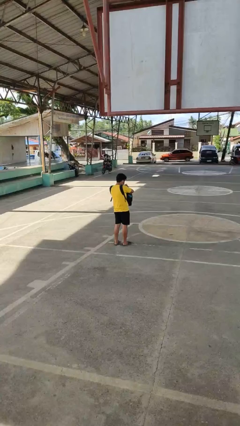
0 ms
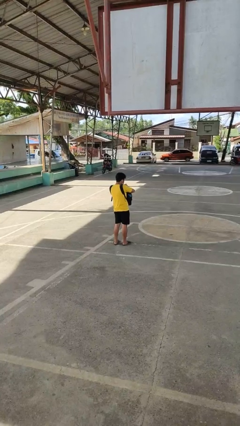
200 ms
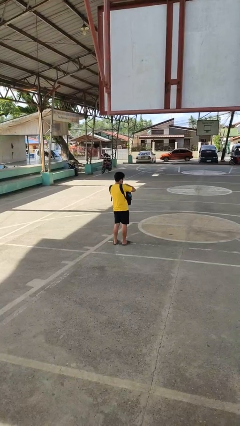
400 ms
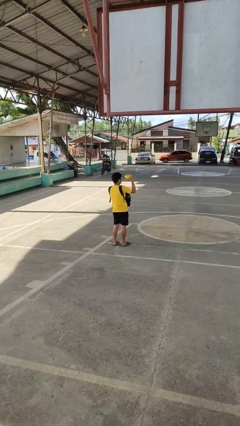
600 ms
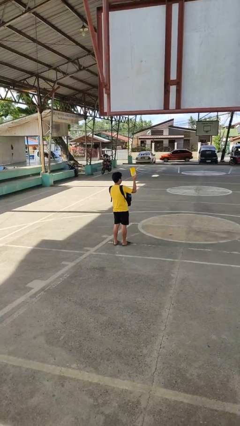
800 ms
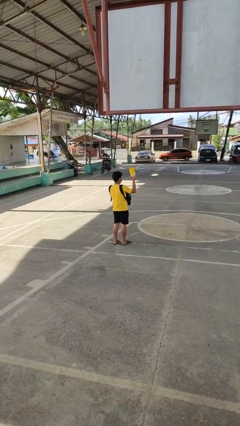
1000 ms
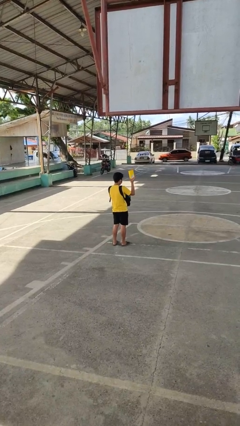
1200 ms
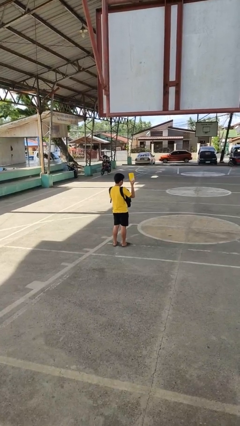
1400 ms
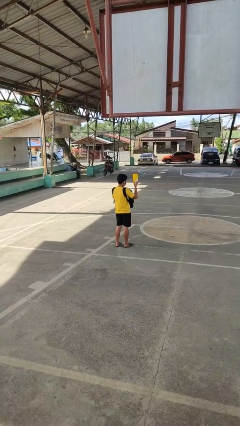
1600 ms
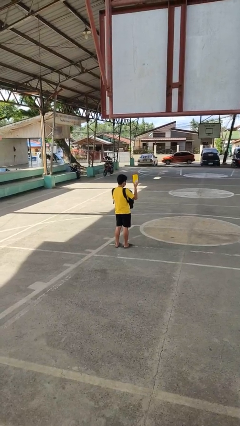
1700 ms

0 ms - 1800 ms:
person takes object from backpack

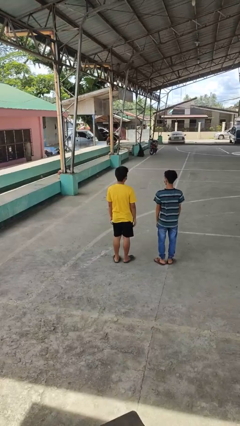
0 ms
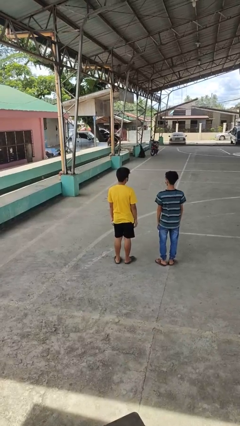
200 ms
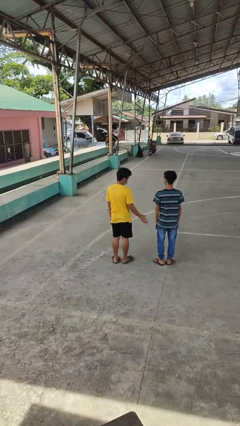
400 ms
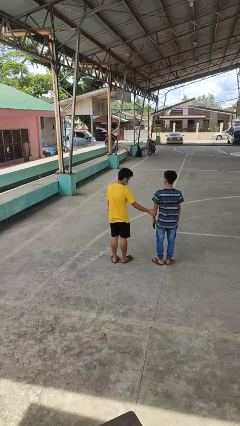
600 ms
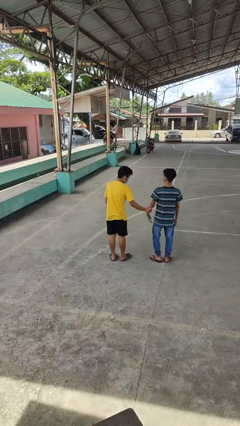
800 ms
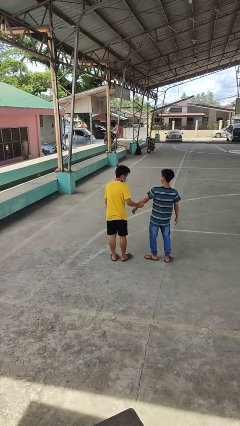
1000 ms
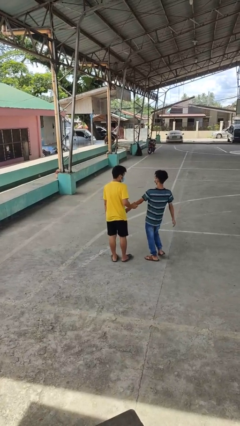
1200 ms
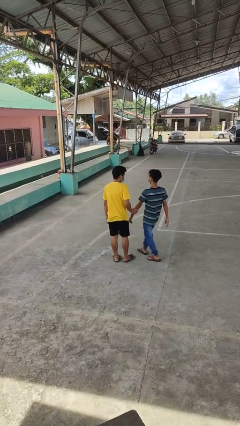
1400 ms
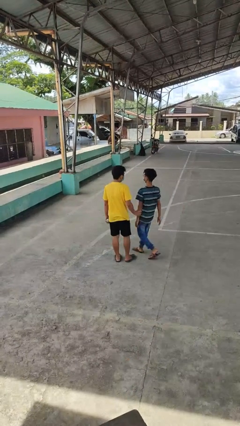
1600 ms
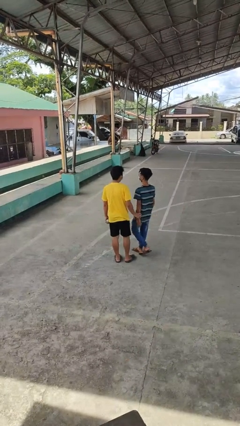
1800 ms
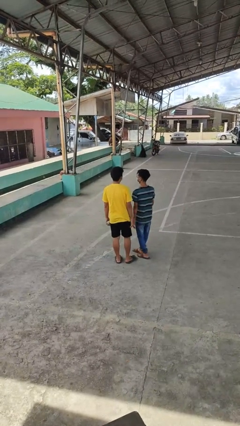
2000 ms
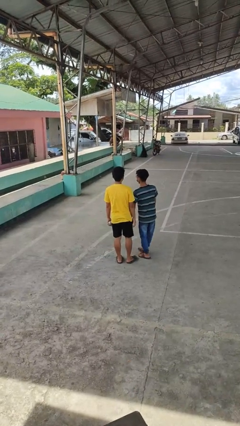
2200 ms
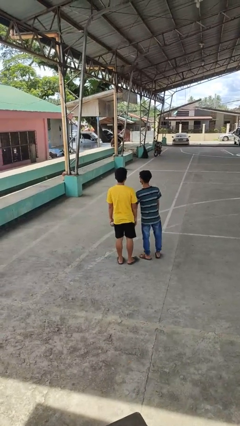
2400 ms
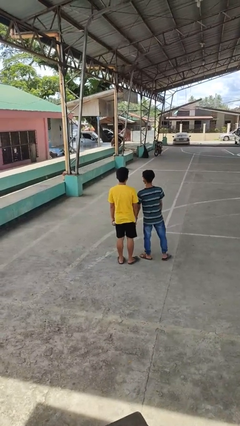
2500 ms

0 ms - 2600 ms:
person grabs person by forearm

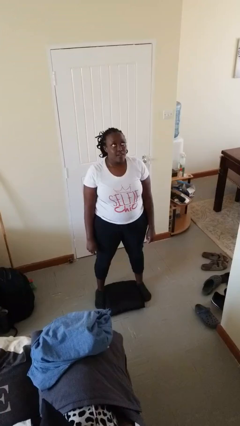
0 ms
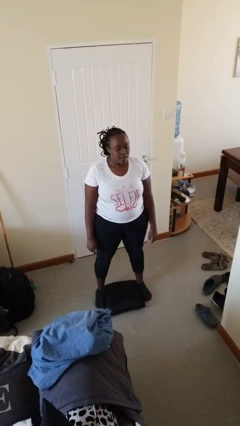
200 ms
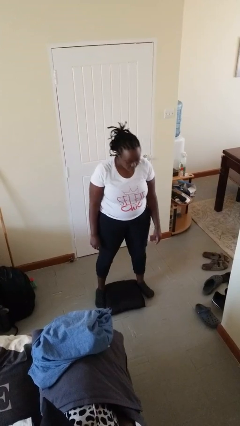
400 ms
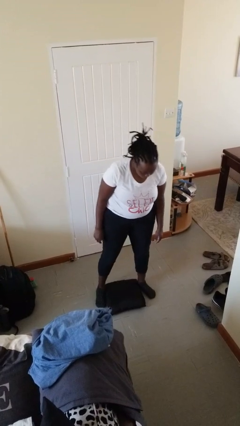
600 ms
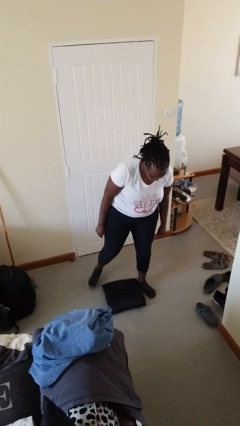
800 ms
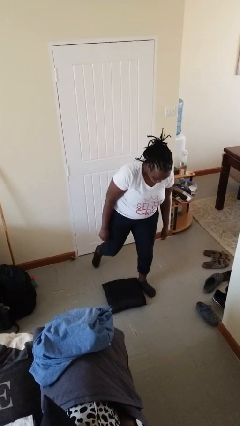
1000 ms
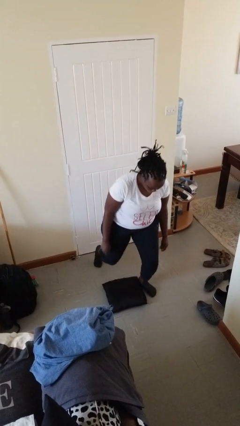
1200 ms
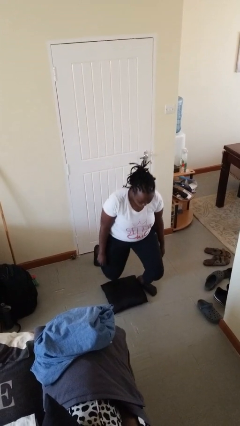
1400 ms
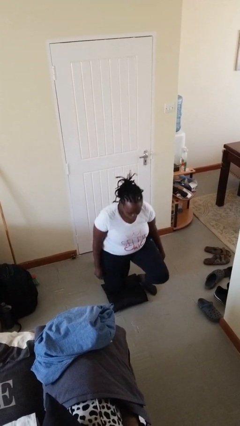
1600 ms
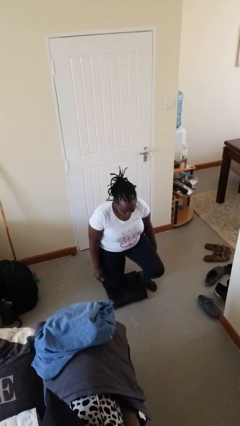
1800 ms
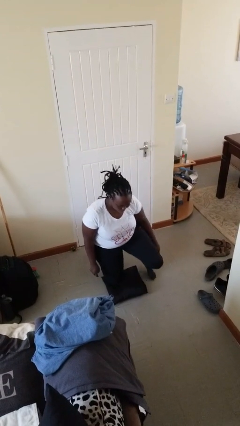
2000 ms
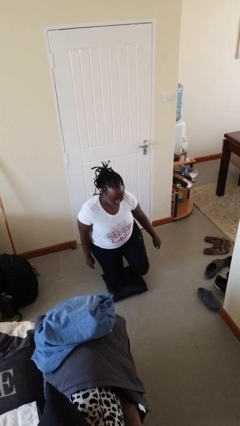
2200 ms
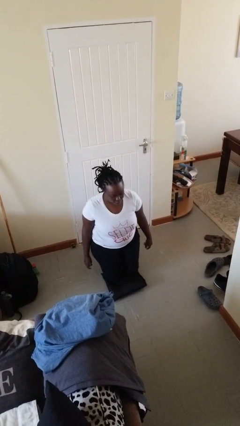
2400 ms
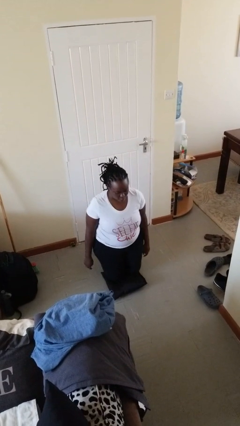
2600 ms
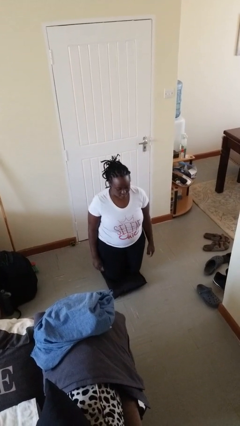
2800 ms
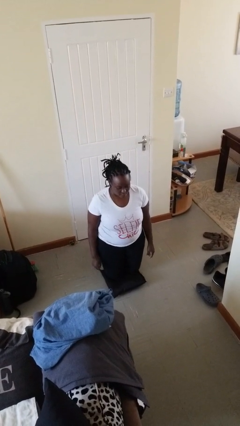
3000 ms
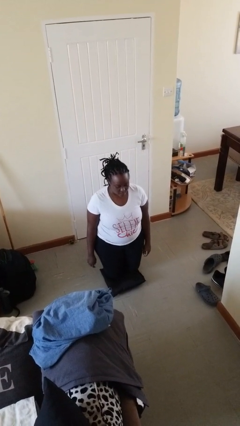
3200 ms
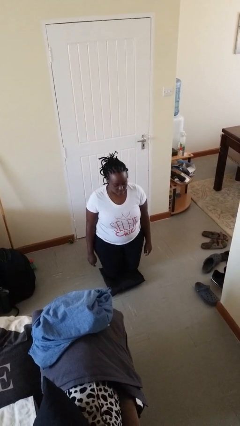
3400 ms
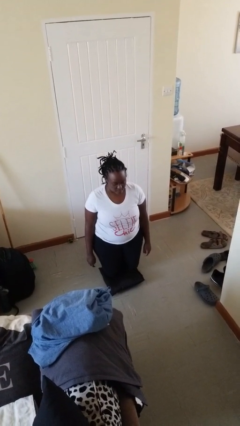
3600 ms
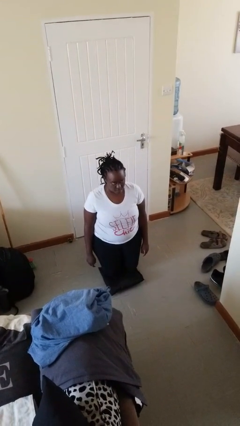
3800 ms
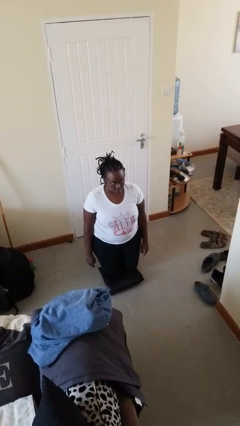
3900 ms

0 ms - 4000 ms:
person kneels

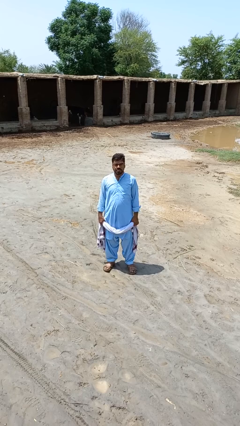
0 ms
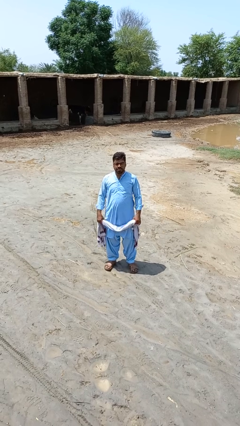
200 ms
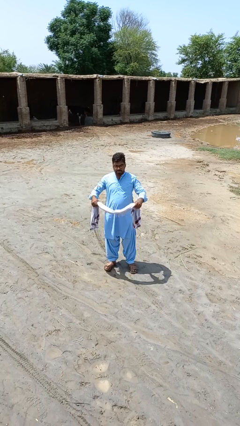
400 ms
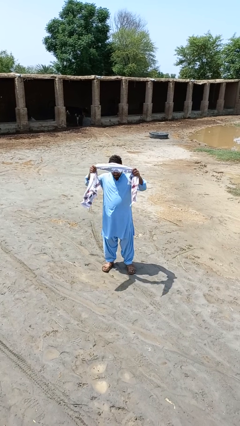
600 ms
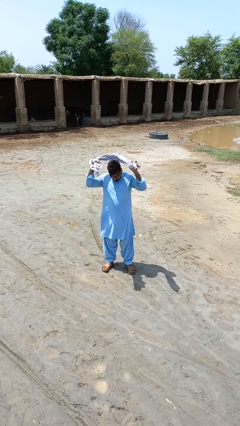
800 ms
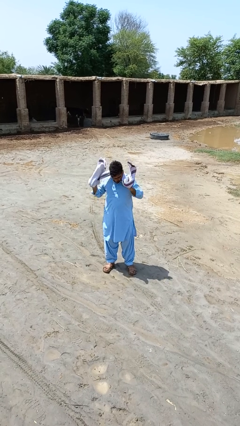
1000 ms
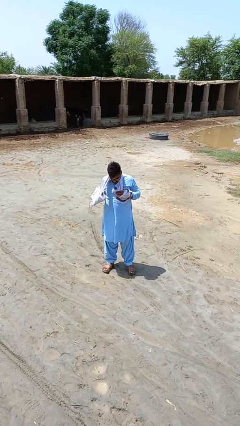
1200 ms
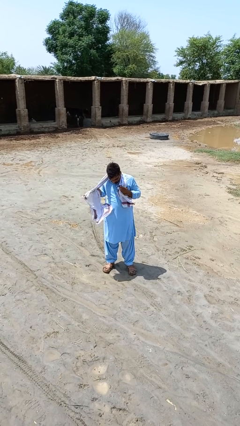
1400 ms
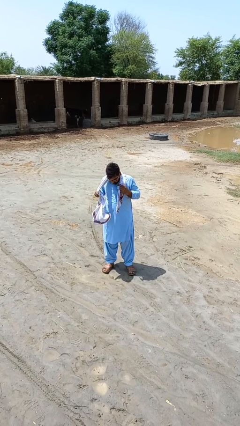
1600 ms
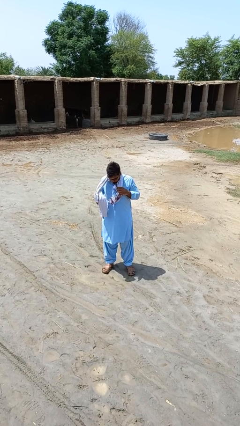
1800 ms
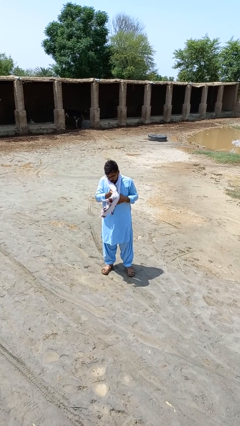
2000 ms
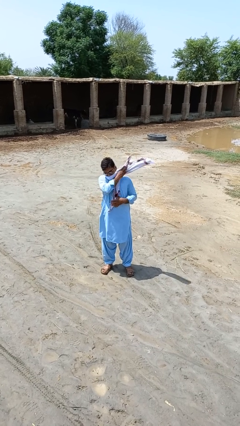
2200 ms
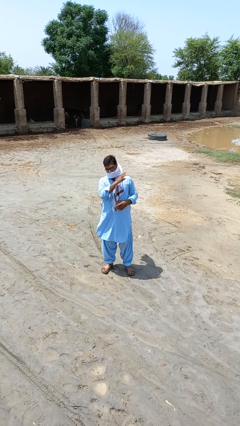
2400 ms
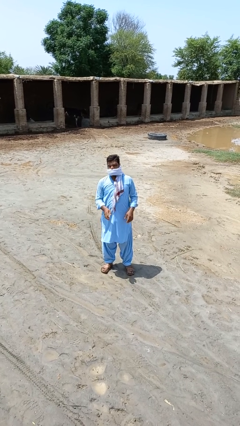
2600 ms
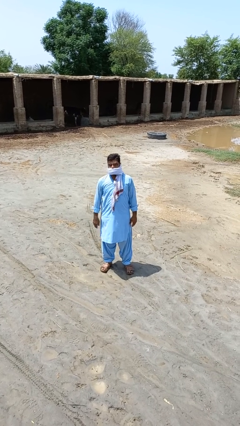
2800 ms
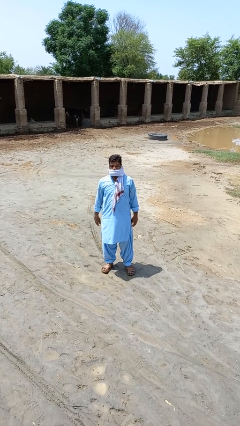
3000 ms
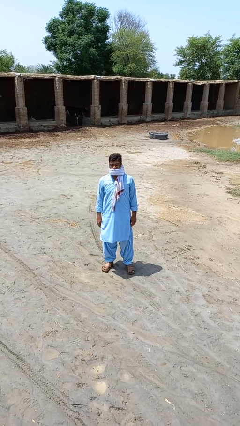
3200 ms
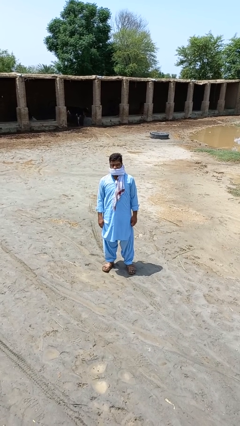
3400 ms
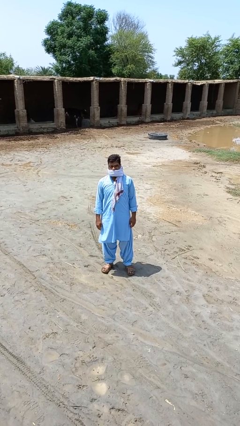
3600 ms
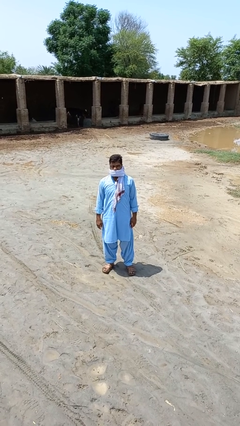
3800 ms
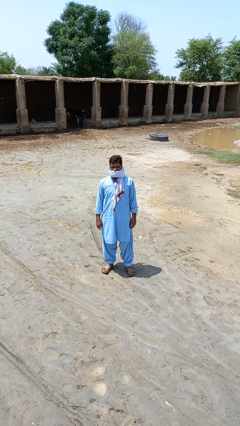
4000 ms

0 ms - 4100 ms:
person puts on scarf

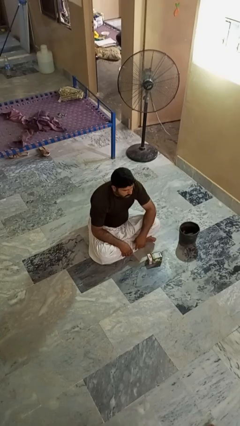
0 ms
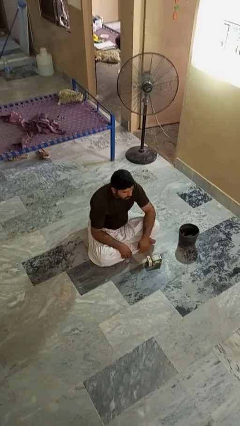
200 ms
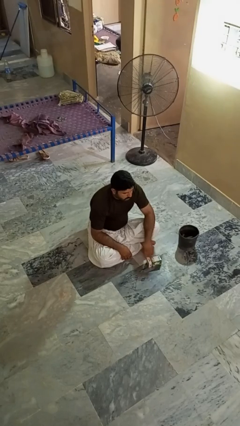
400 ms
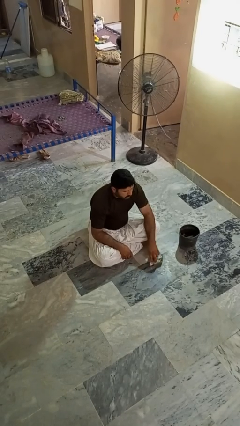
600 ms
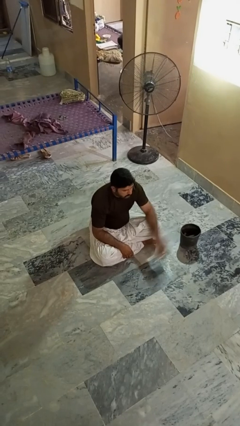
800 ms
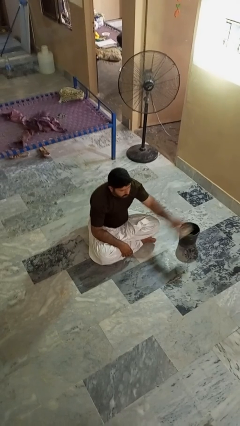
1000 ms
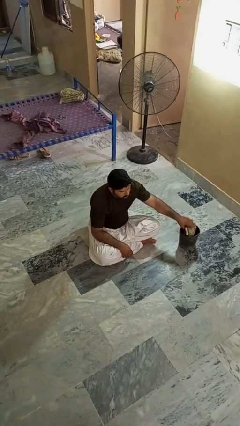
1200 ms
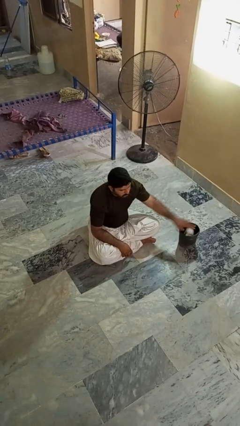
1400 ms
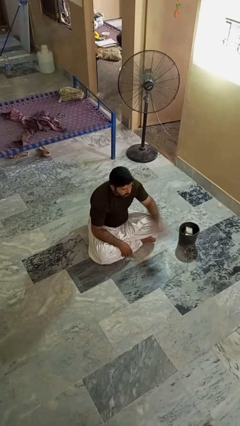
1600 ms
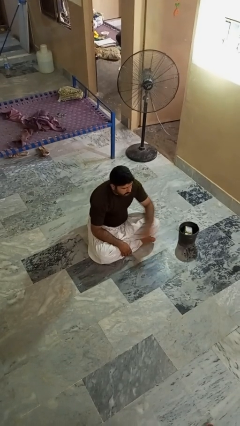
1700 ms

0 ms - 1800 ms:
person puts object into basket

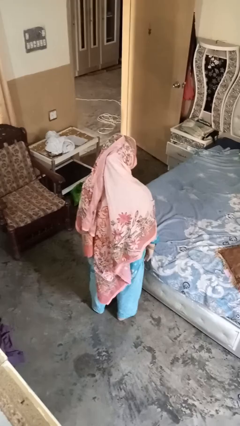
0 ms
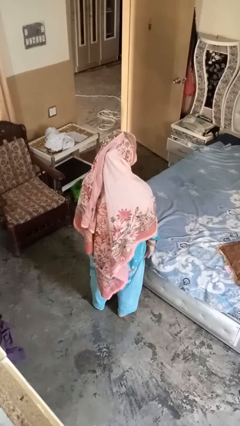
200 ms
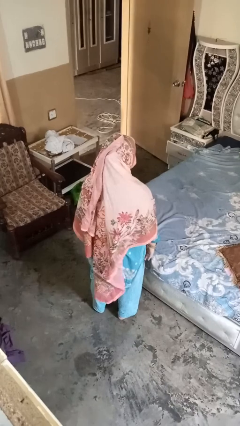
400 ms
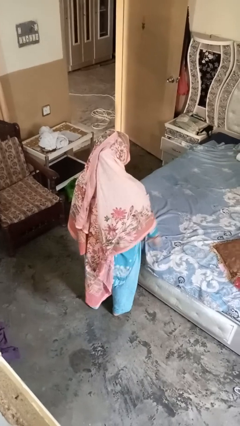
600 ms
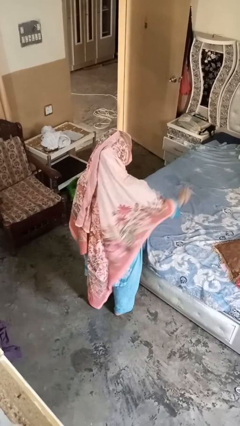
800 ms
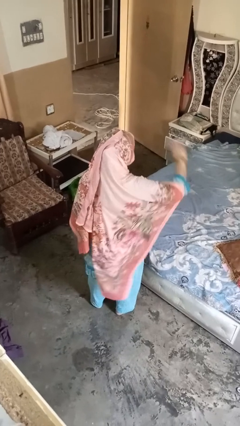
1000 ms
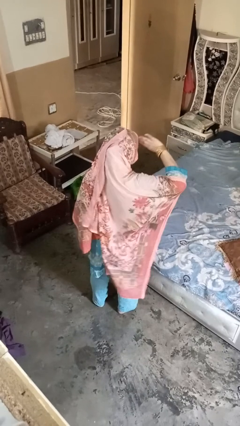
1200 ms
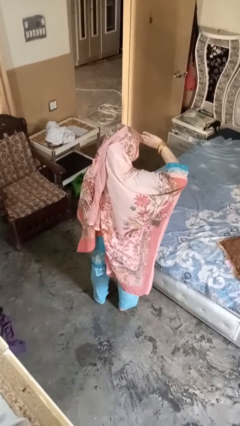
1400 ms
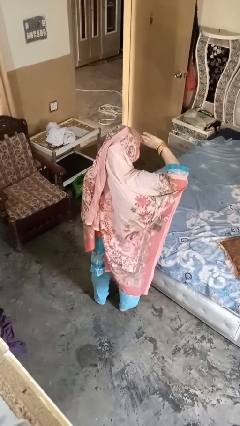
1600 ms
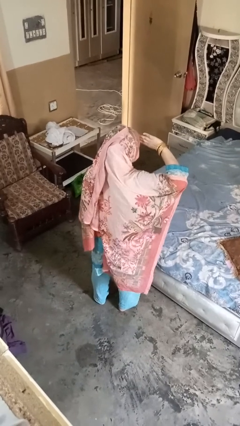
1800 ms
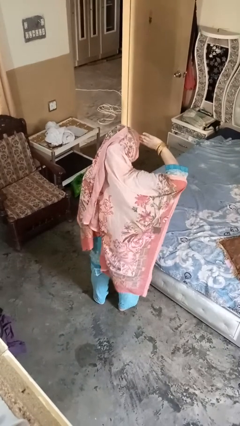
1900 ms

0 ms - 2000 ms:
person salutes

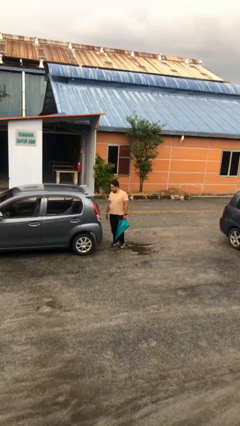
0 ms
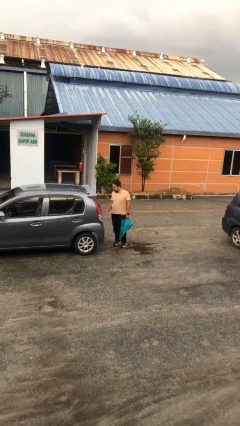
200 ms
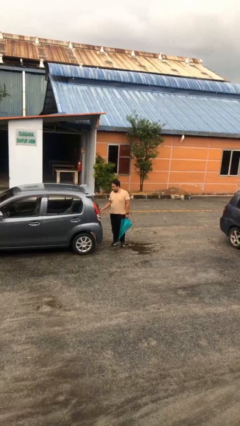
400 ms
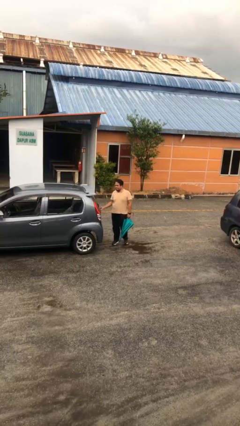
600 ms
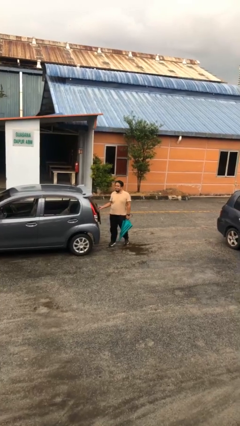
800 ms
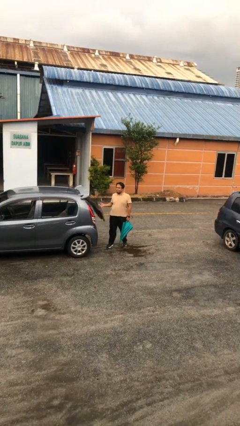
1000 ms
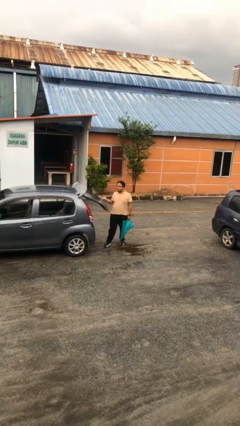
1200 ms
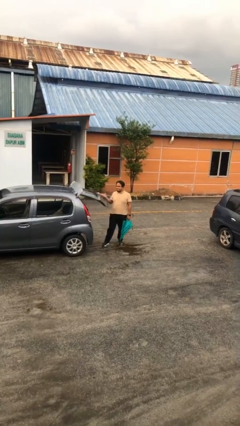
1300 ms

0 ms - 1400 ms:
person opens car trunk
